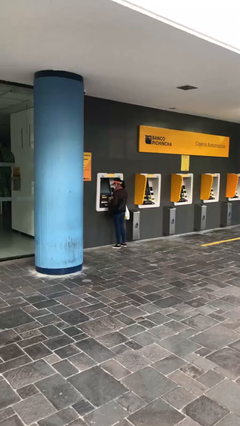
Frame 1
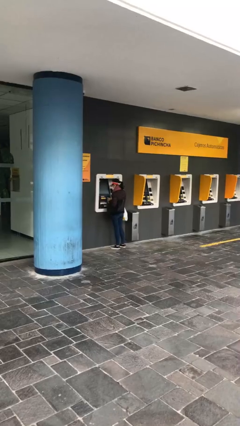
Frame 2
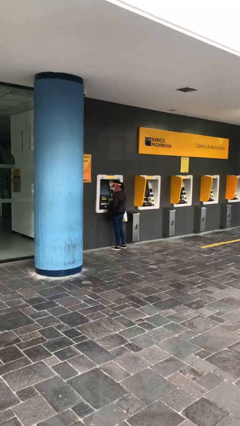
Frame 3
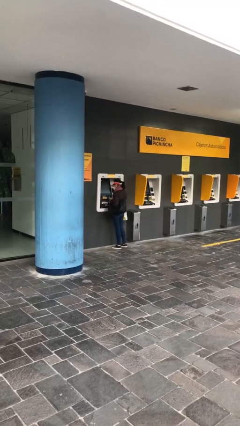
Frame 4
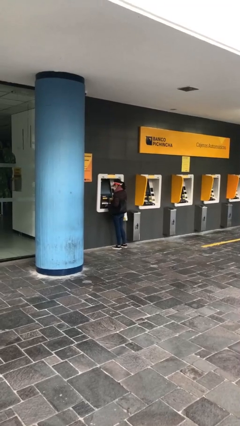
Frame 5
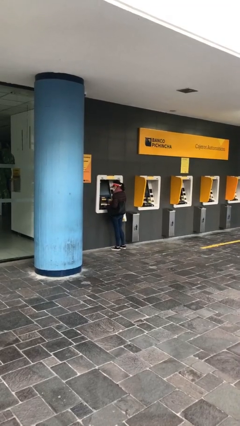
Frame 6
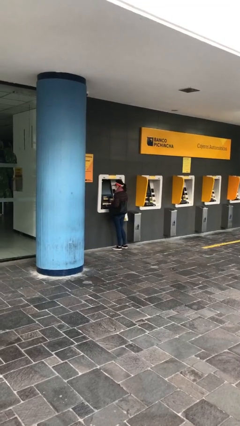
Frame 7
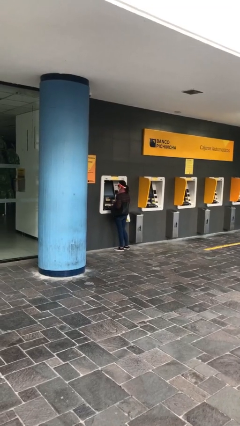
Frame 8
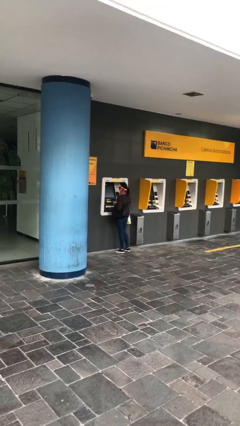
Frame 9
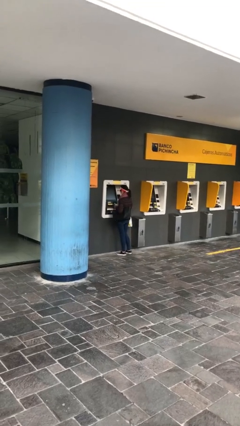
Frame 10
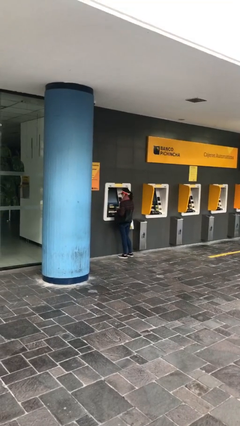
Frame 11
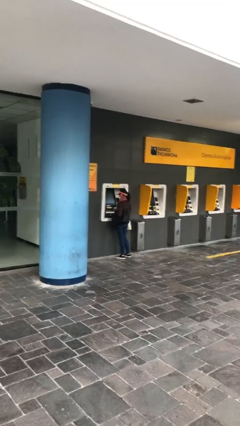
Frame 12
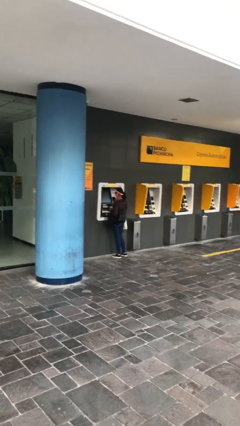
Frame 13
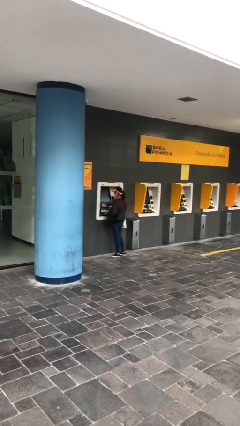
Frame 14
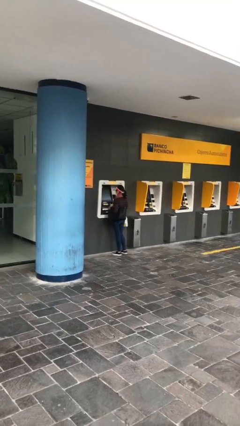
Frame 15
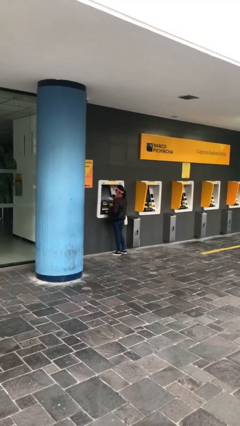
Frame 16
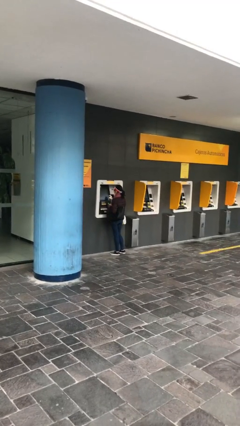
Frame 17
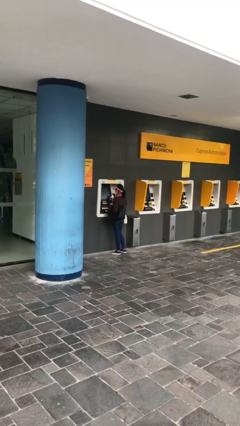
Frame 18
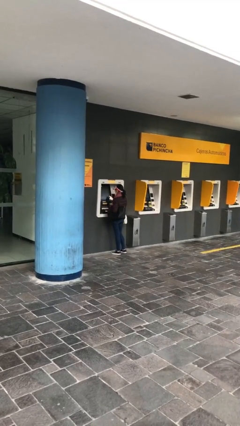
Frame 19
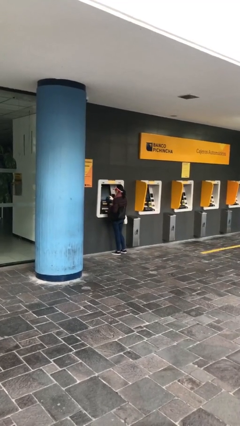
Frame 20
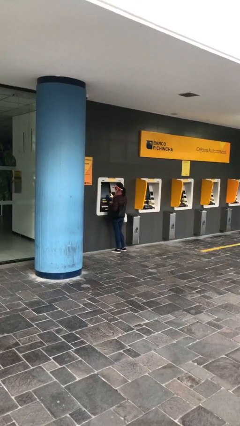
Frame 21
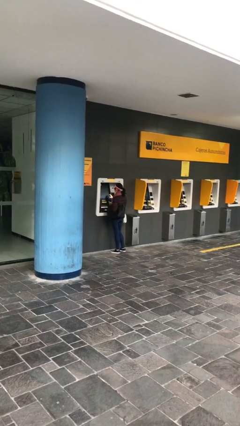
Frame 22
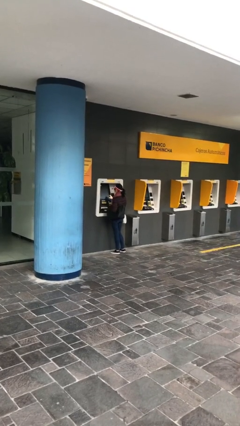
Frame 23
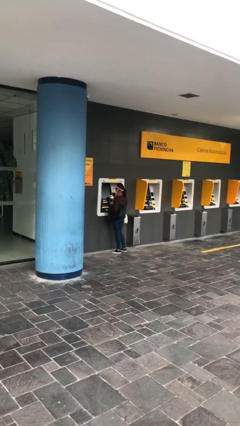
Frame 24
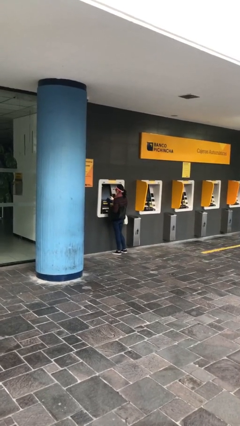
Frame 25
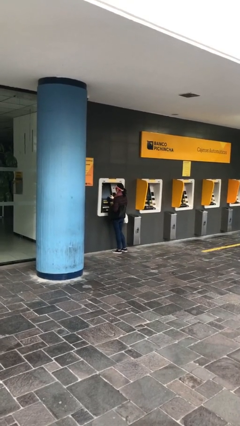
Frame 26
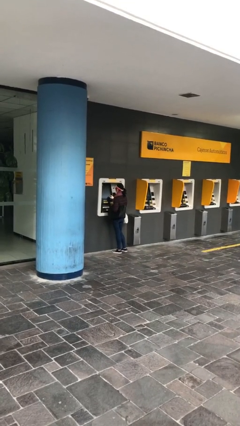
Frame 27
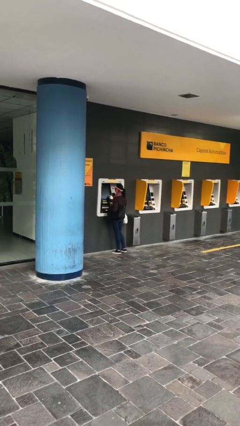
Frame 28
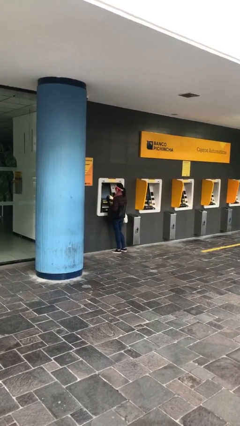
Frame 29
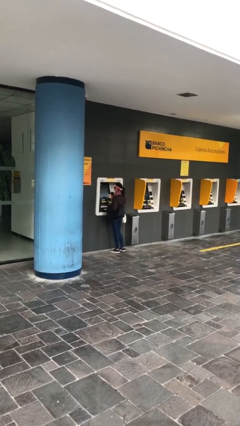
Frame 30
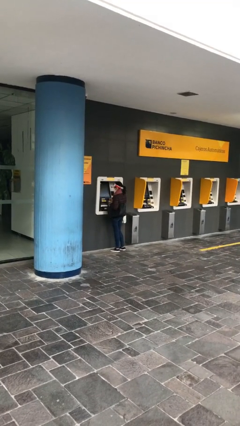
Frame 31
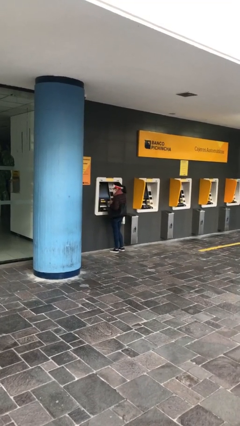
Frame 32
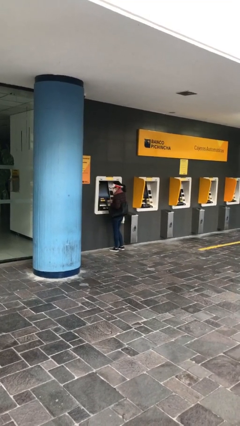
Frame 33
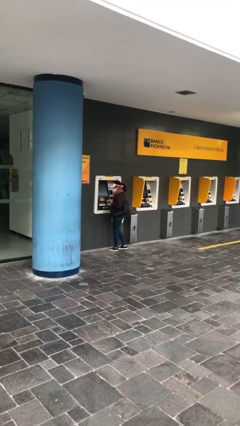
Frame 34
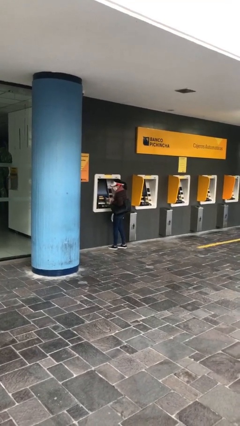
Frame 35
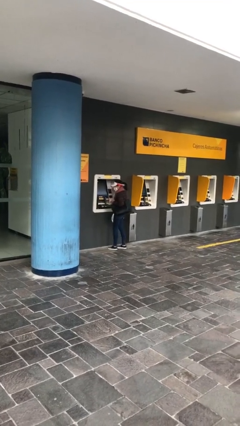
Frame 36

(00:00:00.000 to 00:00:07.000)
person purchases from machine

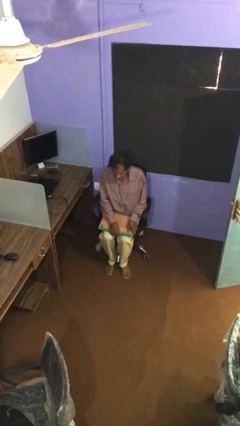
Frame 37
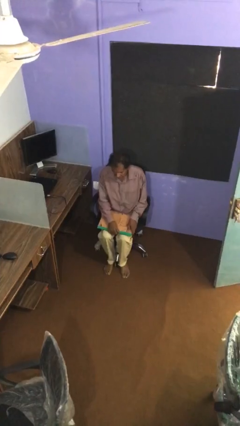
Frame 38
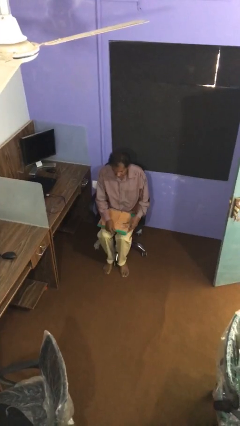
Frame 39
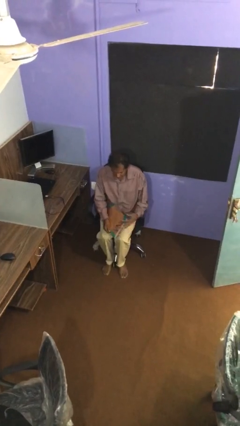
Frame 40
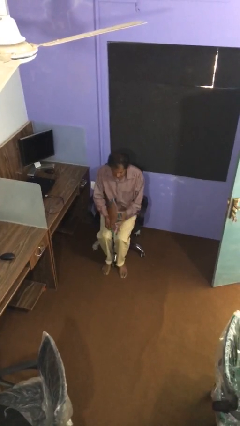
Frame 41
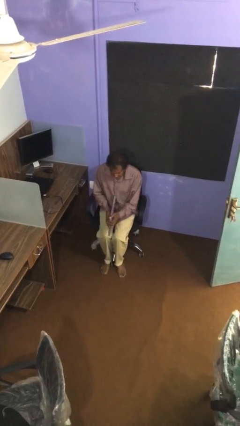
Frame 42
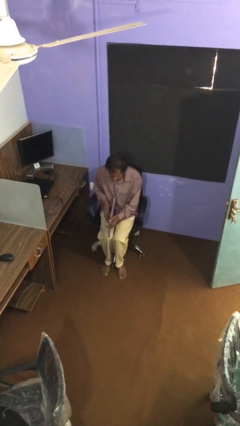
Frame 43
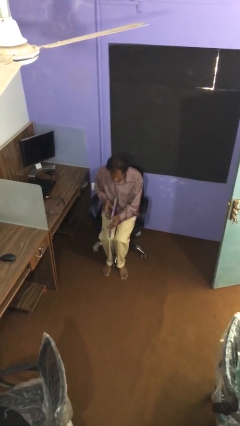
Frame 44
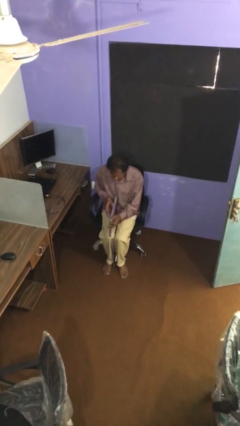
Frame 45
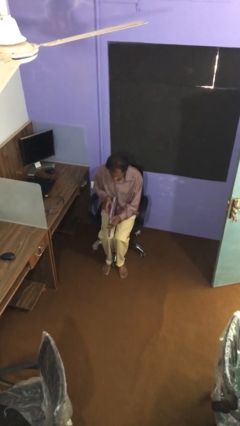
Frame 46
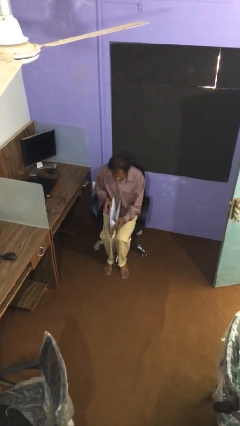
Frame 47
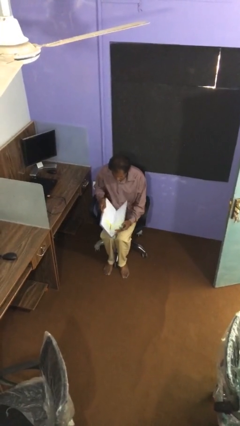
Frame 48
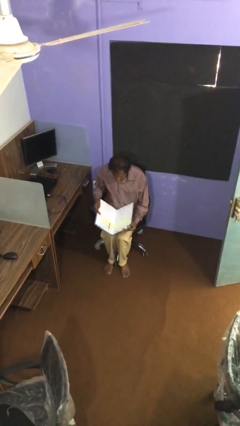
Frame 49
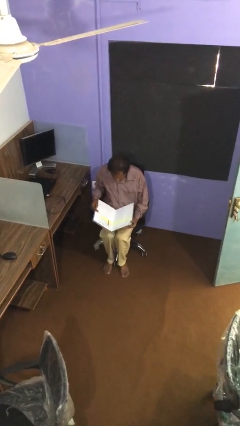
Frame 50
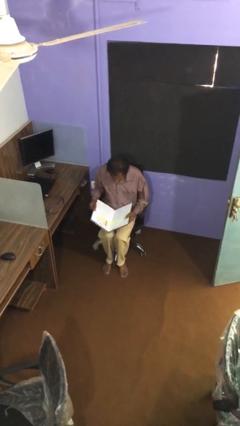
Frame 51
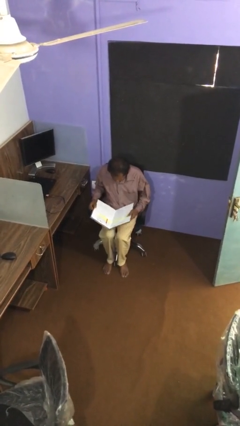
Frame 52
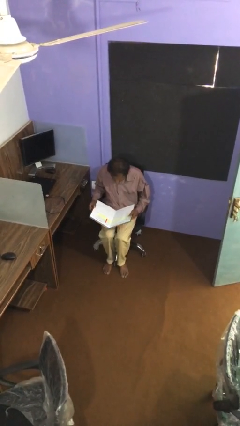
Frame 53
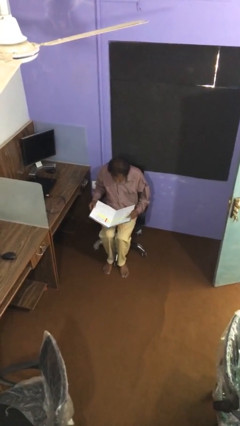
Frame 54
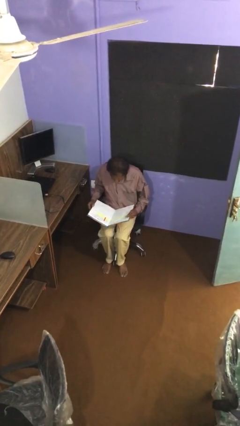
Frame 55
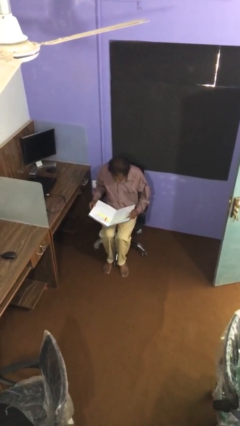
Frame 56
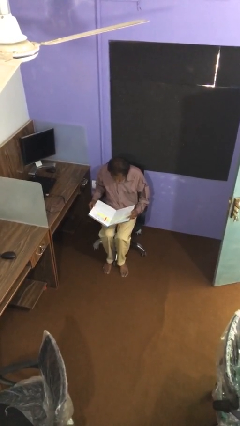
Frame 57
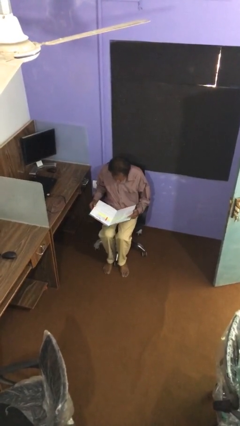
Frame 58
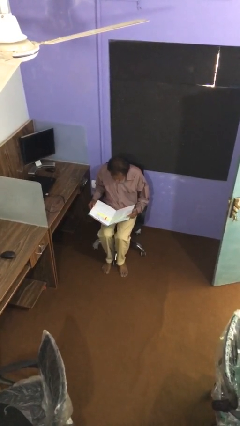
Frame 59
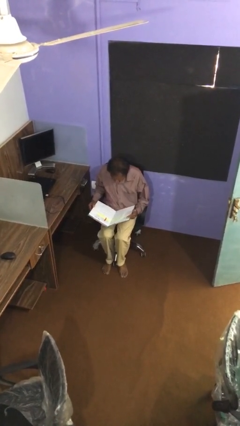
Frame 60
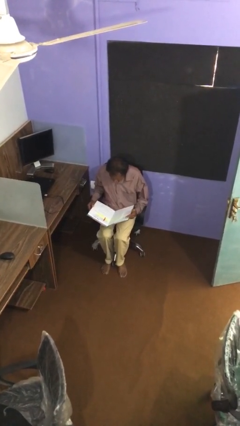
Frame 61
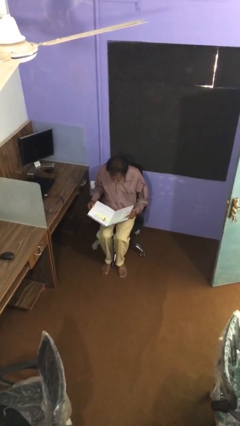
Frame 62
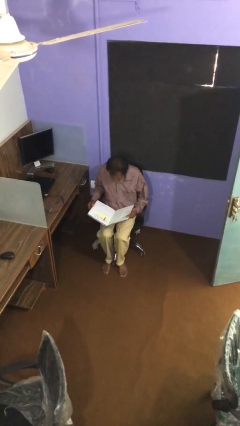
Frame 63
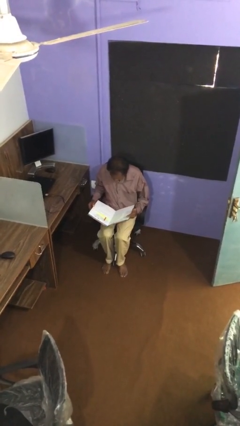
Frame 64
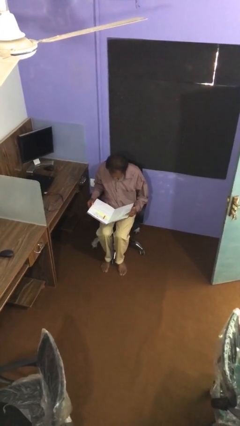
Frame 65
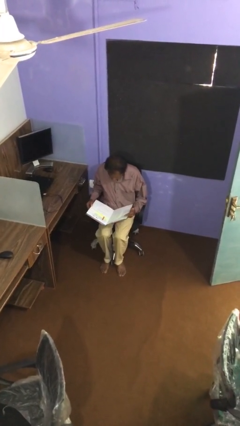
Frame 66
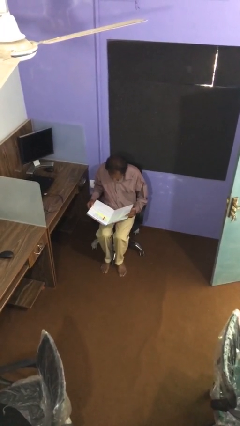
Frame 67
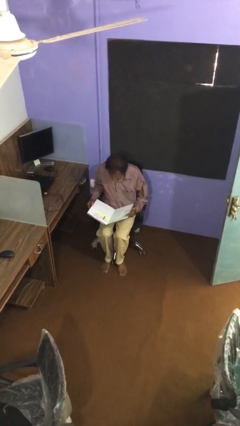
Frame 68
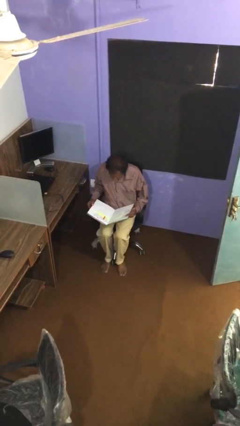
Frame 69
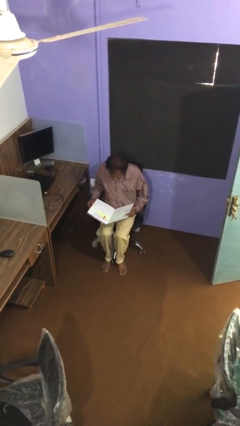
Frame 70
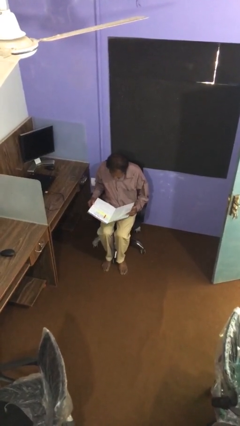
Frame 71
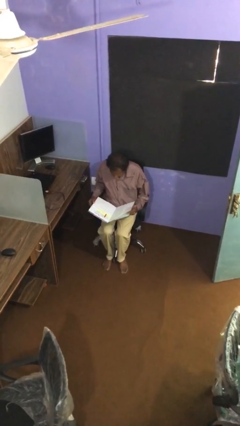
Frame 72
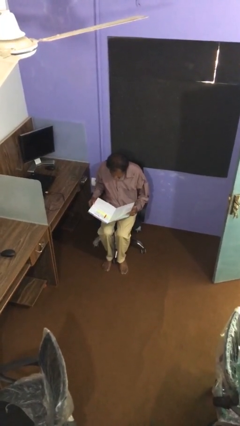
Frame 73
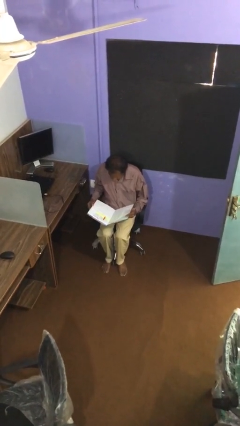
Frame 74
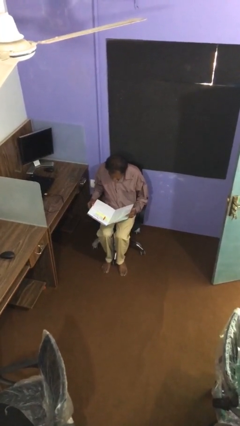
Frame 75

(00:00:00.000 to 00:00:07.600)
person reads document

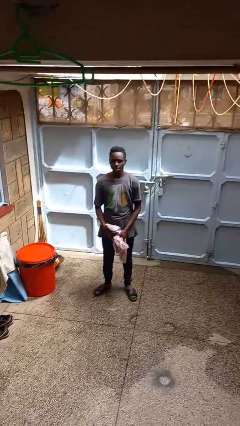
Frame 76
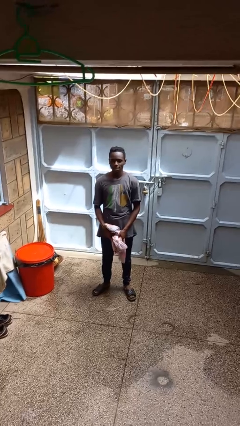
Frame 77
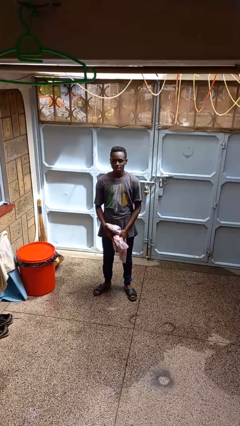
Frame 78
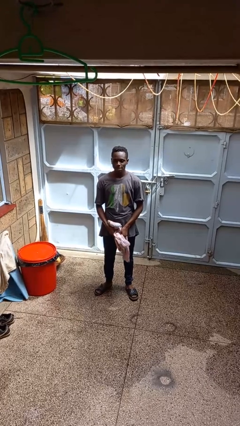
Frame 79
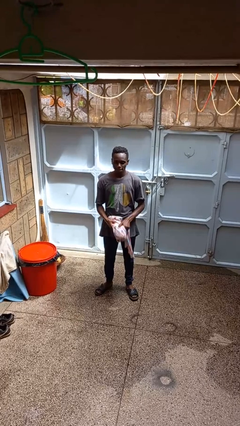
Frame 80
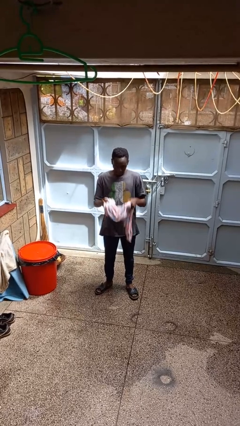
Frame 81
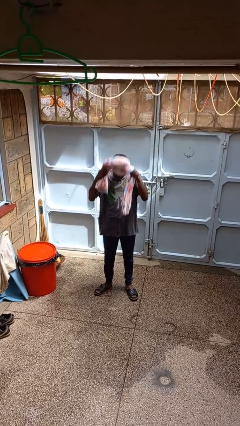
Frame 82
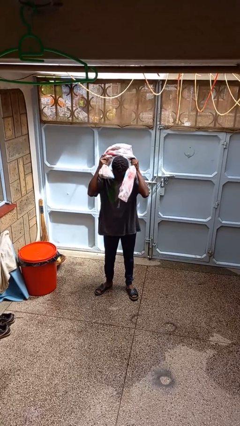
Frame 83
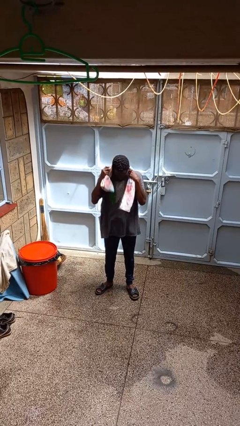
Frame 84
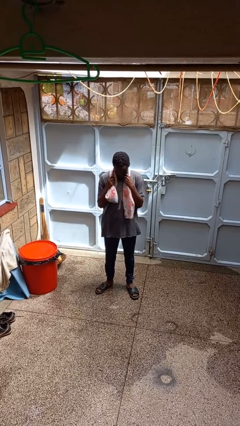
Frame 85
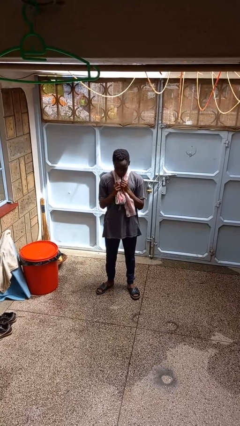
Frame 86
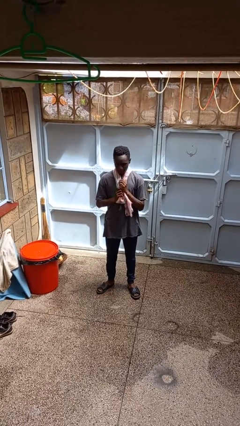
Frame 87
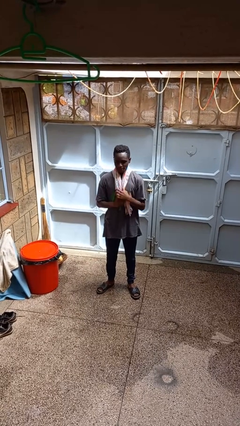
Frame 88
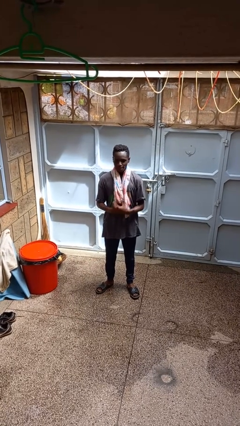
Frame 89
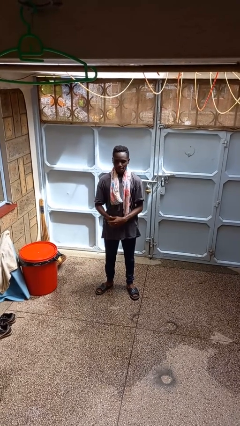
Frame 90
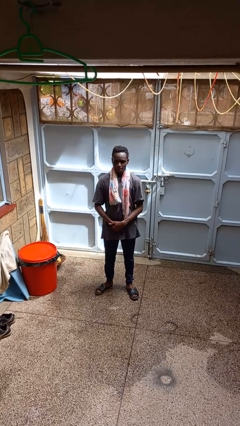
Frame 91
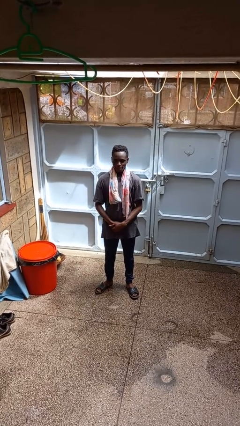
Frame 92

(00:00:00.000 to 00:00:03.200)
person puts on scarf
